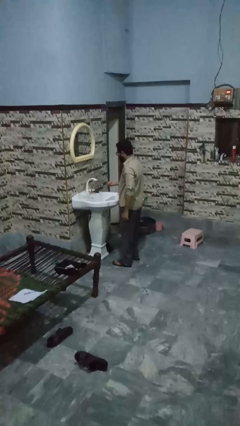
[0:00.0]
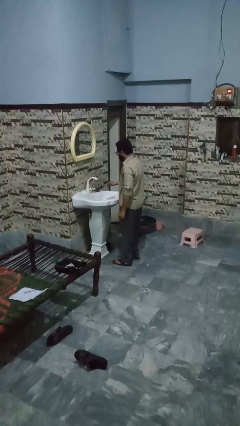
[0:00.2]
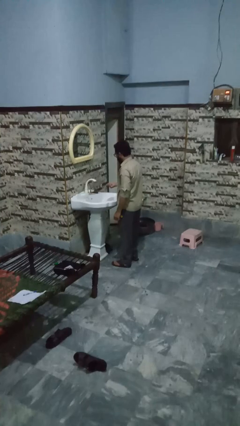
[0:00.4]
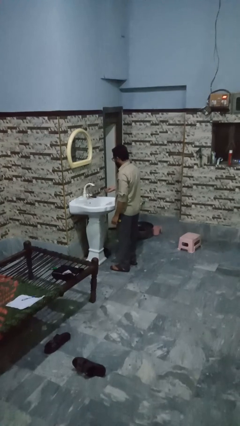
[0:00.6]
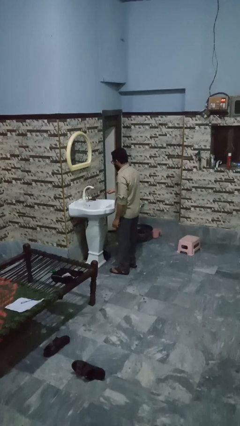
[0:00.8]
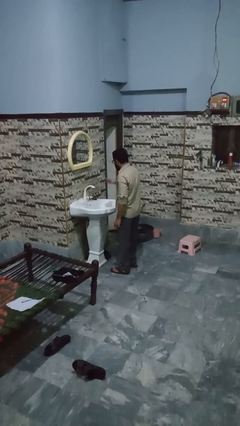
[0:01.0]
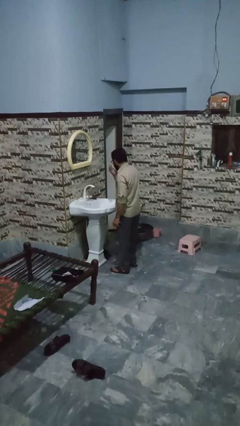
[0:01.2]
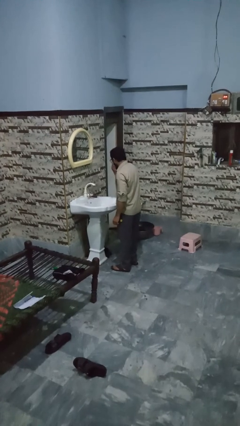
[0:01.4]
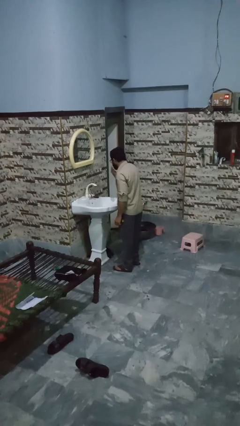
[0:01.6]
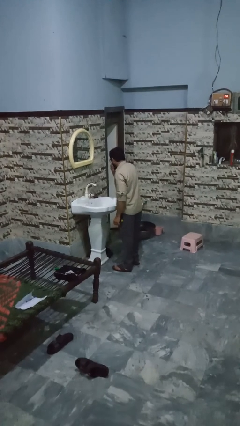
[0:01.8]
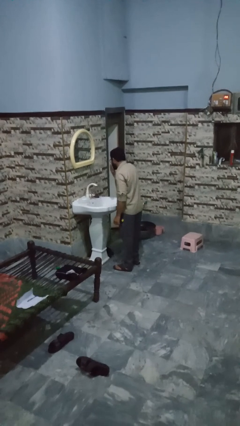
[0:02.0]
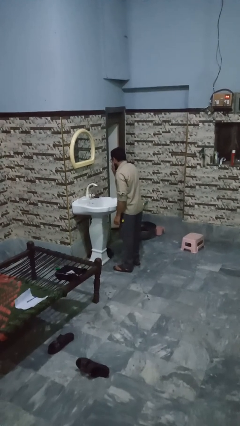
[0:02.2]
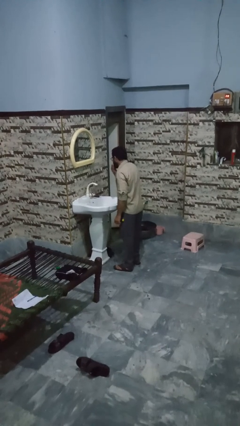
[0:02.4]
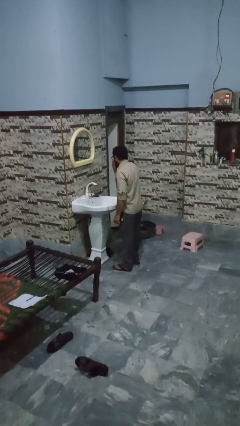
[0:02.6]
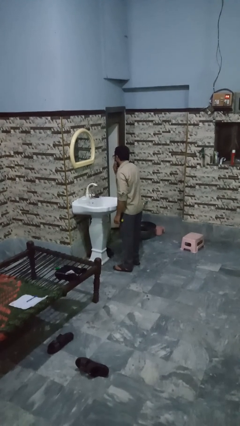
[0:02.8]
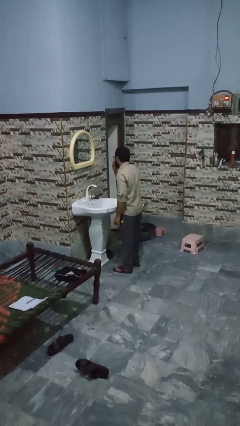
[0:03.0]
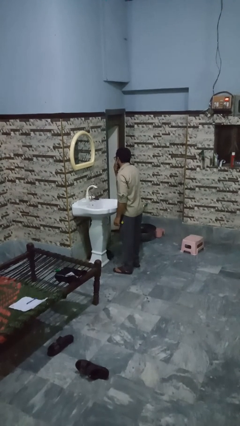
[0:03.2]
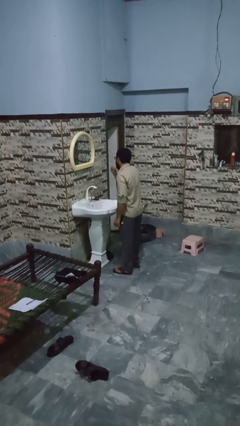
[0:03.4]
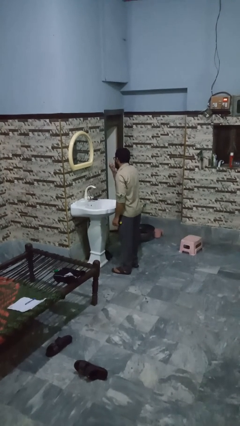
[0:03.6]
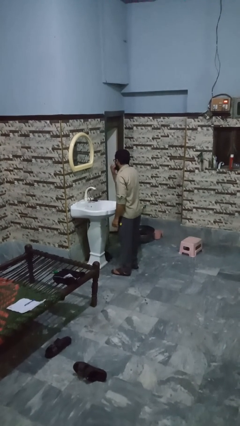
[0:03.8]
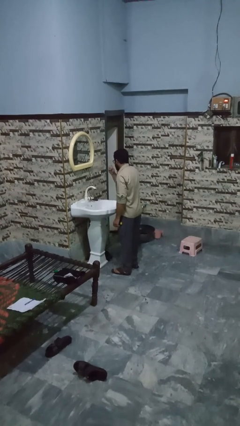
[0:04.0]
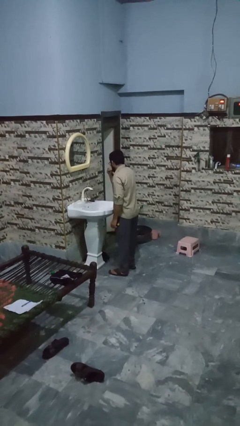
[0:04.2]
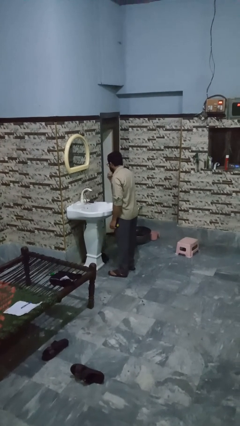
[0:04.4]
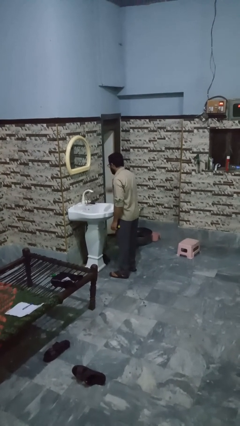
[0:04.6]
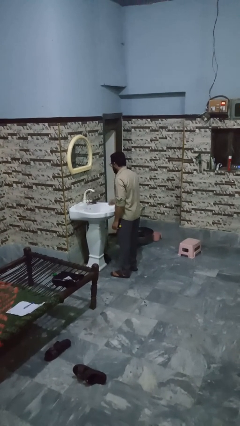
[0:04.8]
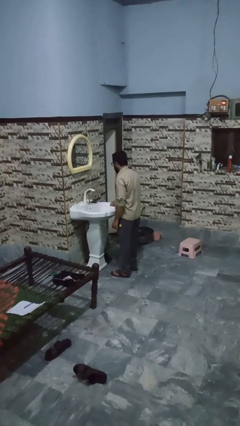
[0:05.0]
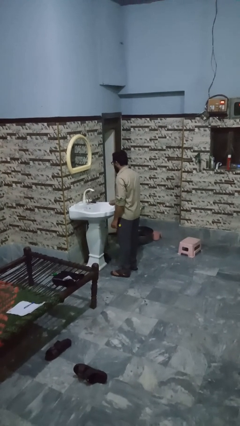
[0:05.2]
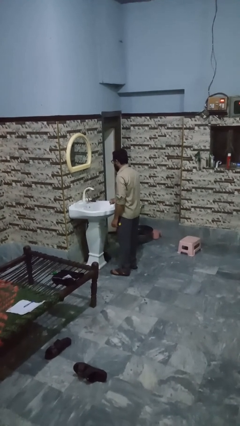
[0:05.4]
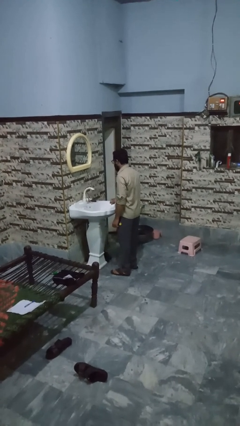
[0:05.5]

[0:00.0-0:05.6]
person applies shaving cream

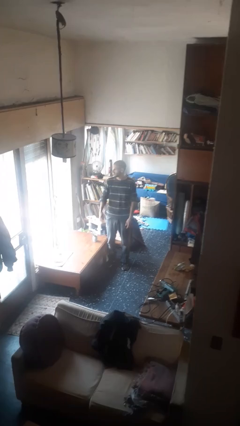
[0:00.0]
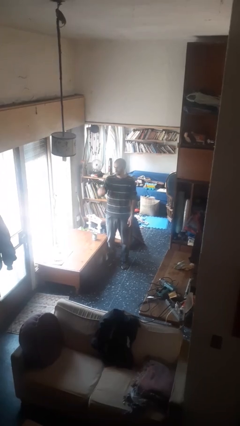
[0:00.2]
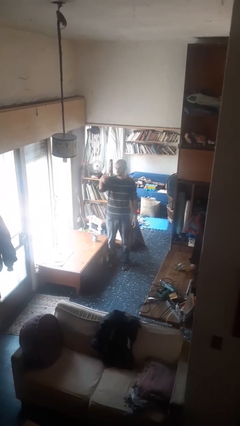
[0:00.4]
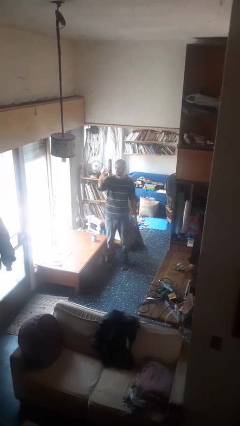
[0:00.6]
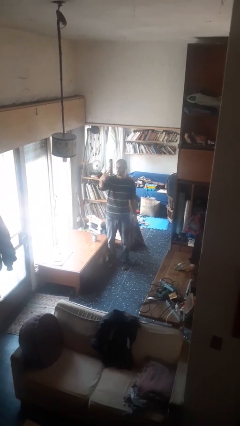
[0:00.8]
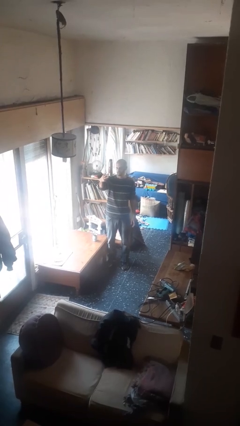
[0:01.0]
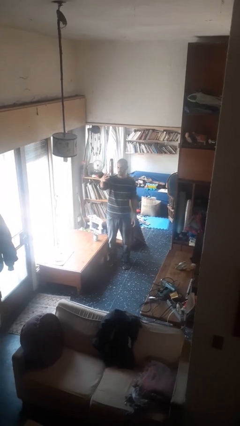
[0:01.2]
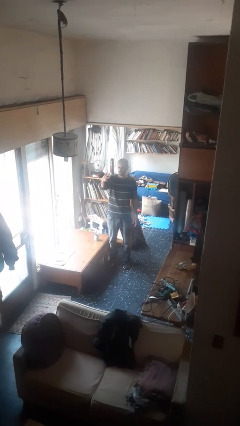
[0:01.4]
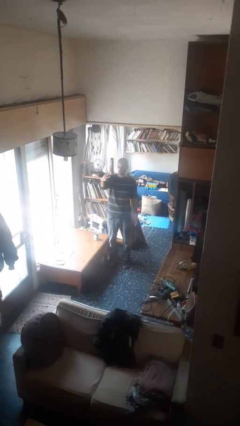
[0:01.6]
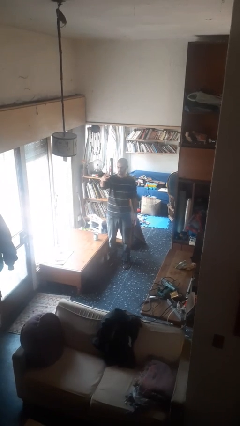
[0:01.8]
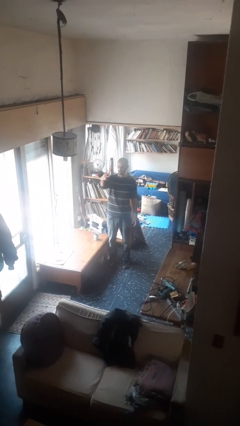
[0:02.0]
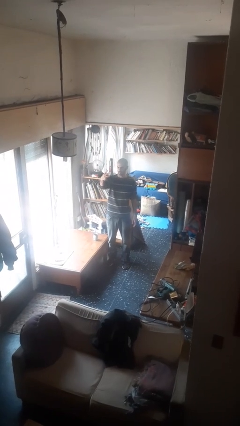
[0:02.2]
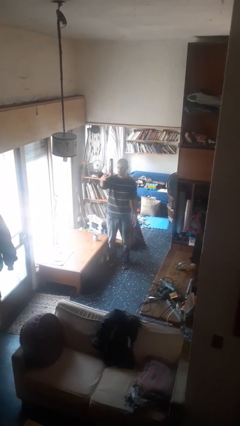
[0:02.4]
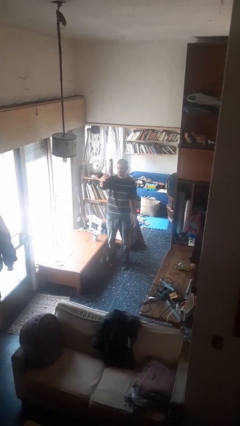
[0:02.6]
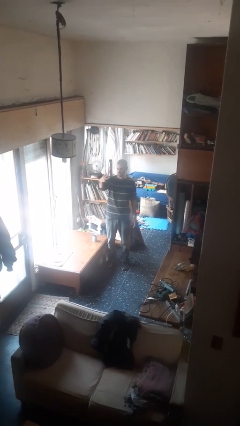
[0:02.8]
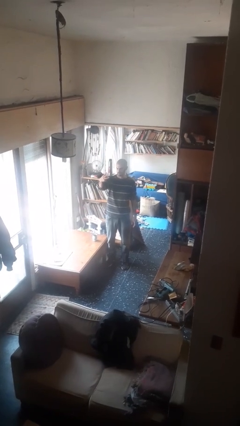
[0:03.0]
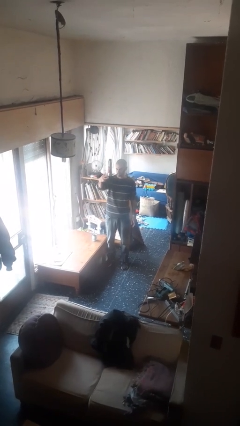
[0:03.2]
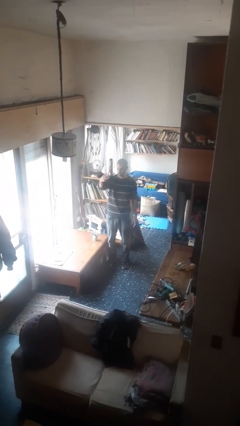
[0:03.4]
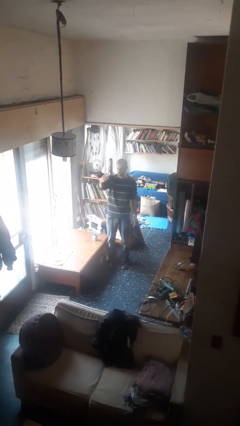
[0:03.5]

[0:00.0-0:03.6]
person gestures number three

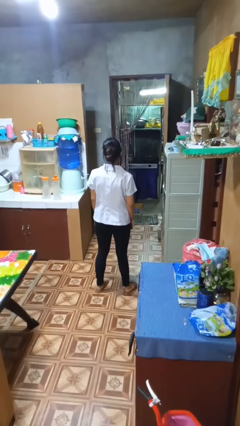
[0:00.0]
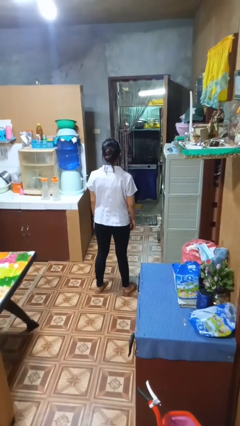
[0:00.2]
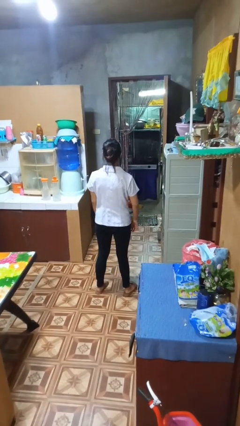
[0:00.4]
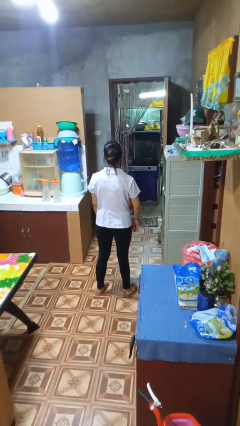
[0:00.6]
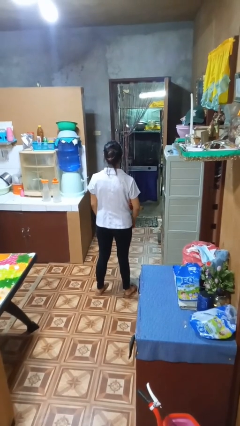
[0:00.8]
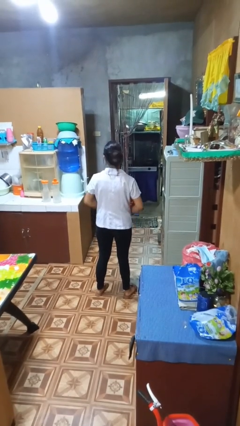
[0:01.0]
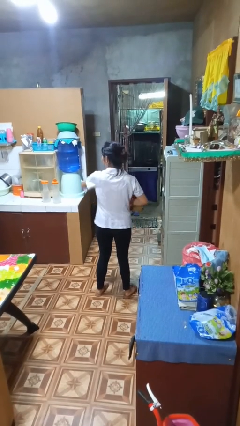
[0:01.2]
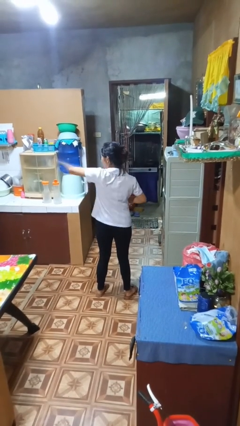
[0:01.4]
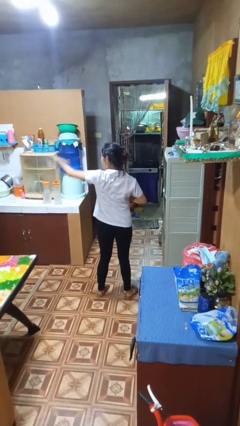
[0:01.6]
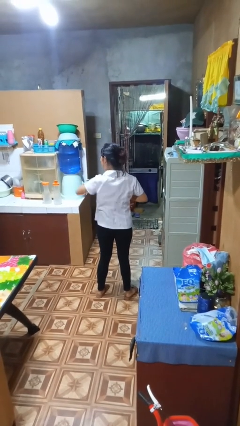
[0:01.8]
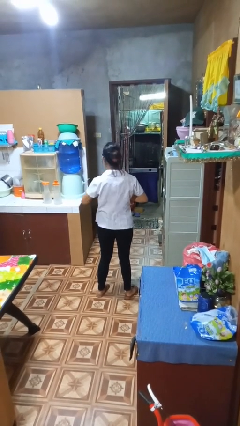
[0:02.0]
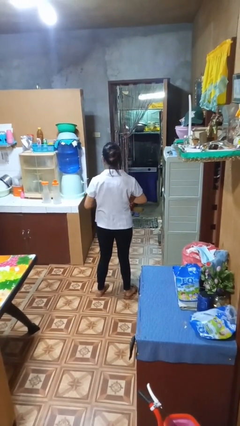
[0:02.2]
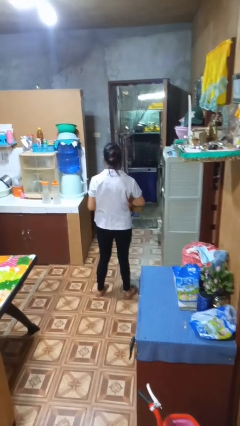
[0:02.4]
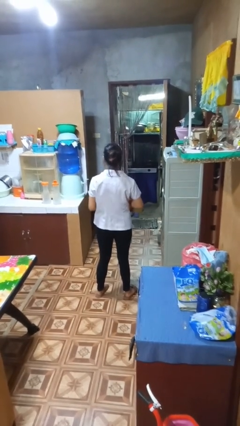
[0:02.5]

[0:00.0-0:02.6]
person karate chop
